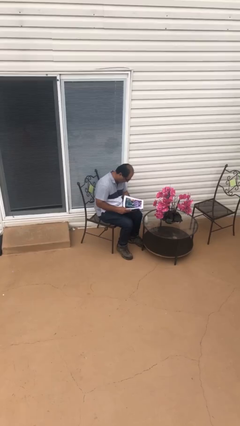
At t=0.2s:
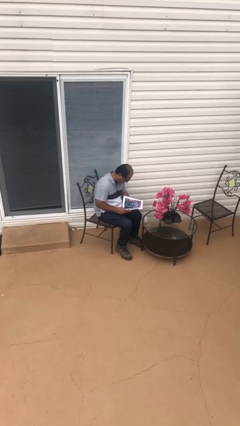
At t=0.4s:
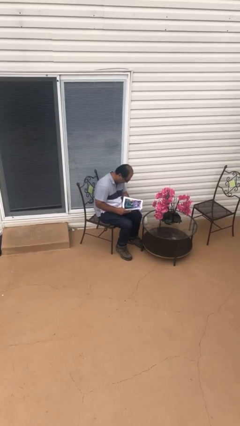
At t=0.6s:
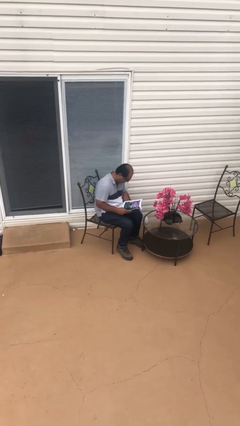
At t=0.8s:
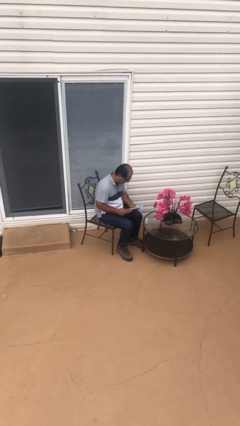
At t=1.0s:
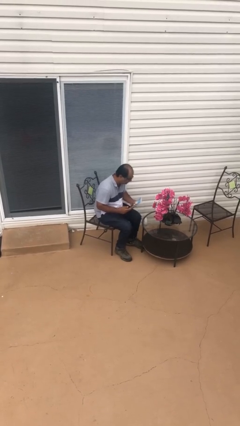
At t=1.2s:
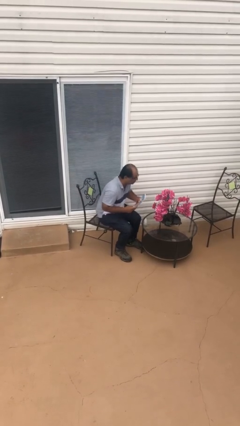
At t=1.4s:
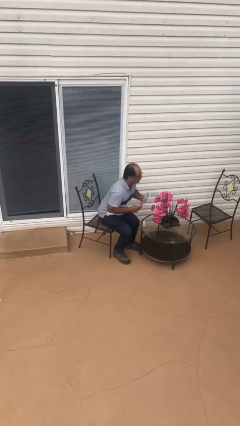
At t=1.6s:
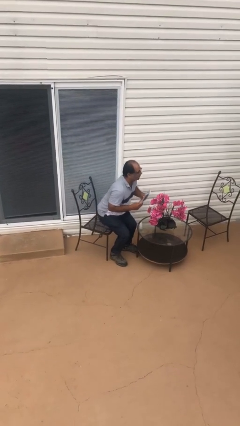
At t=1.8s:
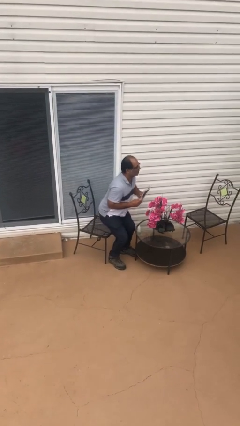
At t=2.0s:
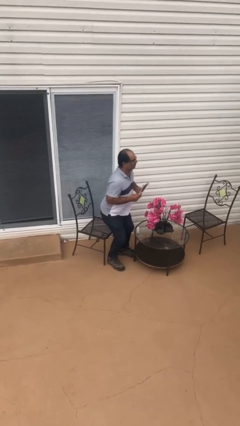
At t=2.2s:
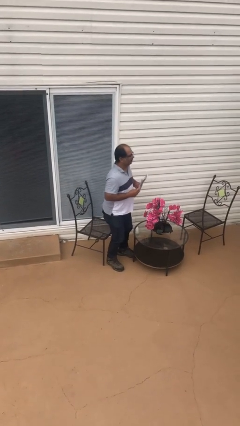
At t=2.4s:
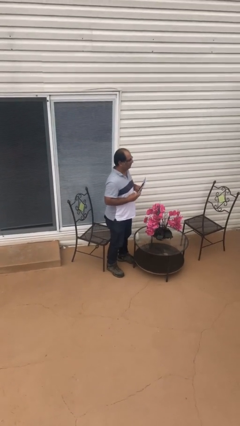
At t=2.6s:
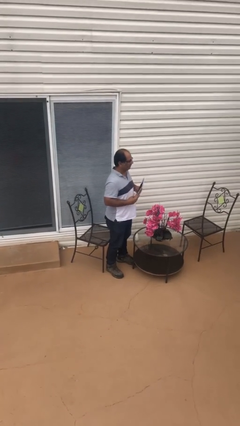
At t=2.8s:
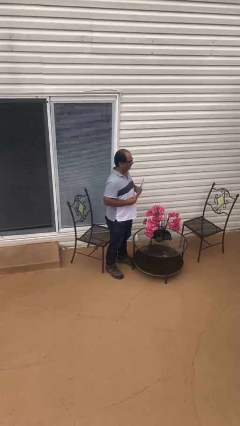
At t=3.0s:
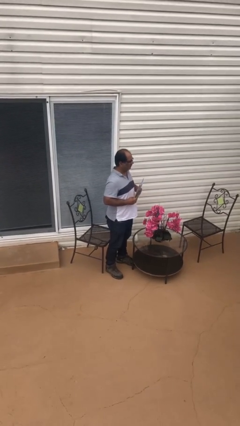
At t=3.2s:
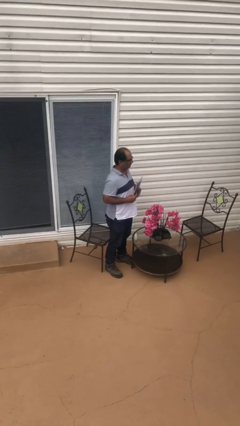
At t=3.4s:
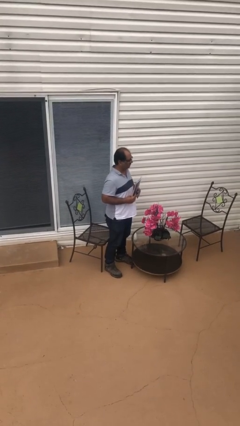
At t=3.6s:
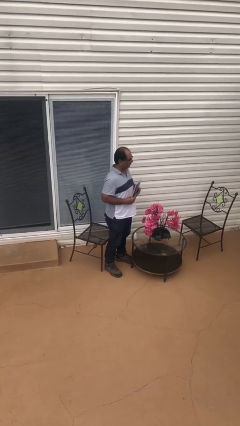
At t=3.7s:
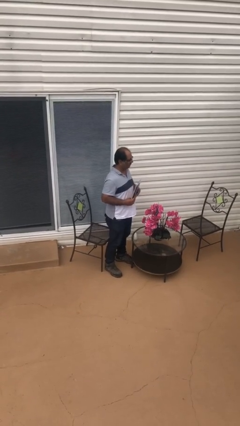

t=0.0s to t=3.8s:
person stands up

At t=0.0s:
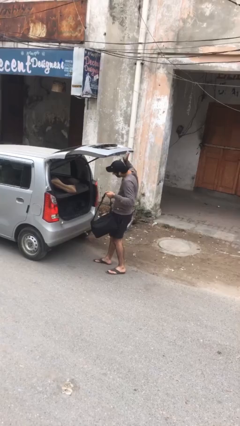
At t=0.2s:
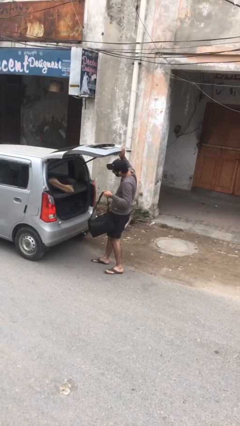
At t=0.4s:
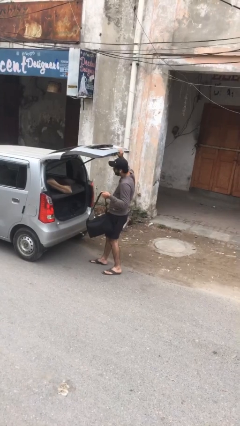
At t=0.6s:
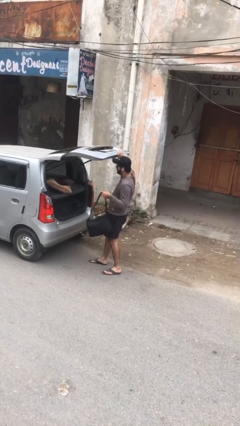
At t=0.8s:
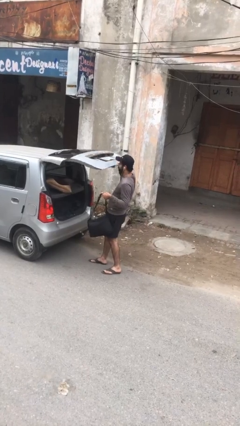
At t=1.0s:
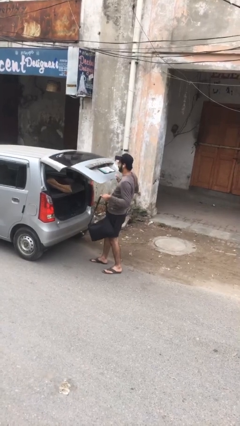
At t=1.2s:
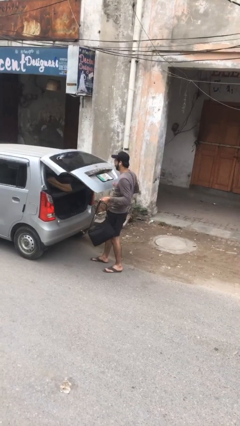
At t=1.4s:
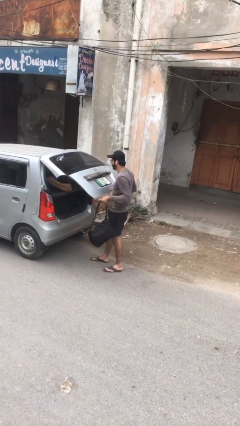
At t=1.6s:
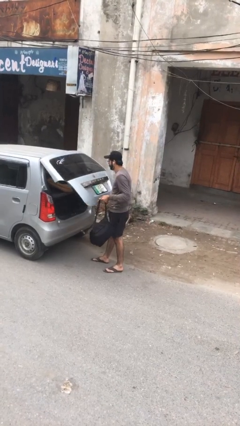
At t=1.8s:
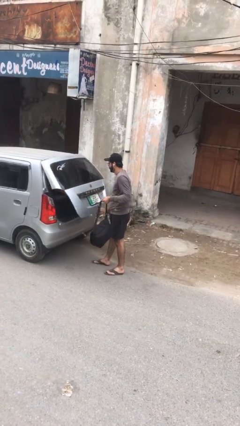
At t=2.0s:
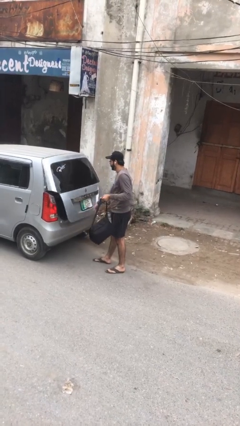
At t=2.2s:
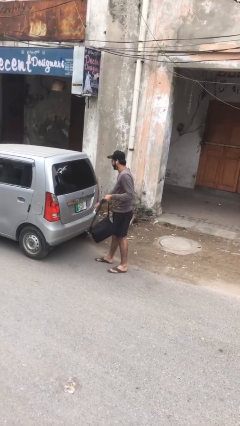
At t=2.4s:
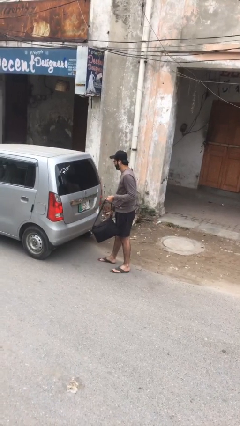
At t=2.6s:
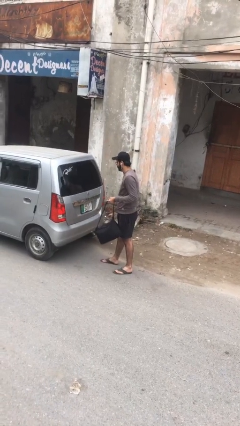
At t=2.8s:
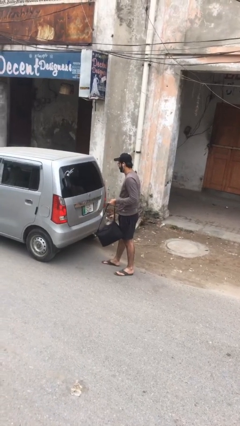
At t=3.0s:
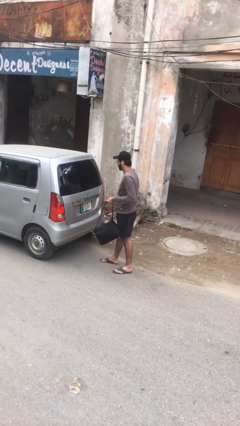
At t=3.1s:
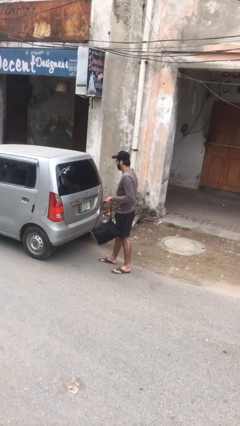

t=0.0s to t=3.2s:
person closes car trunk

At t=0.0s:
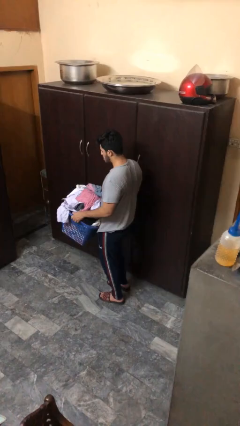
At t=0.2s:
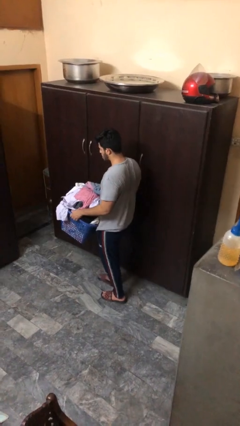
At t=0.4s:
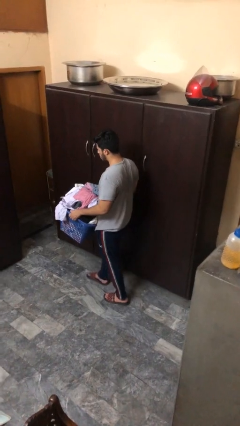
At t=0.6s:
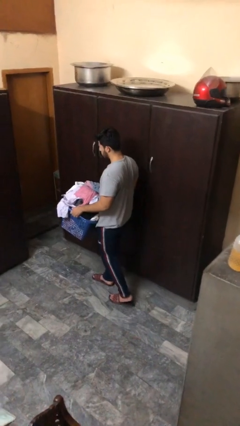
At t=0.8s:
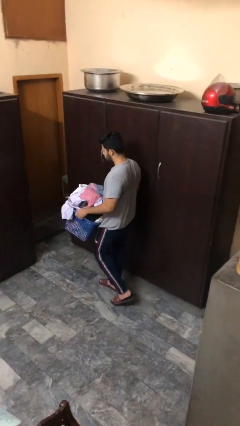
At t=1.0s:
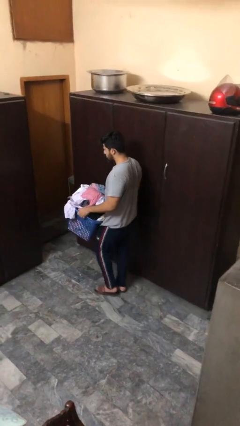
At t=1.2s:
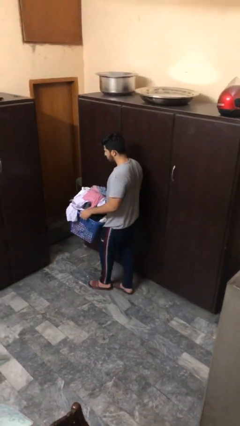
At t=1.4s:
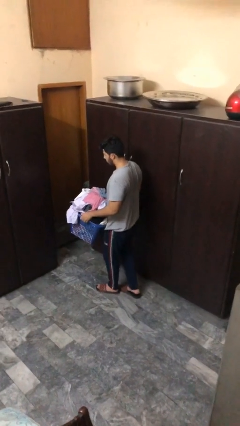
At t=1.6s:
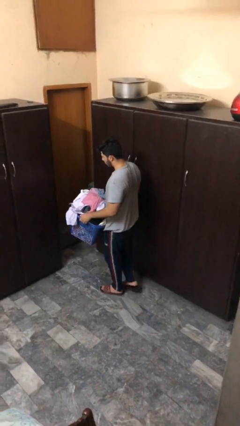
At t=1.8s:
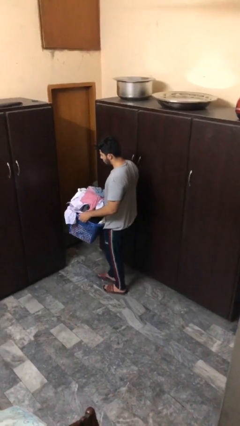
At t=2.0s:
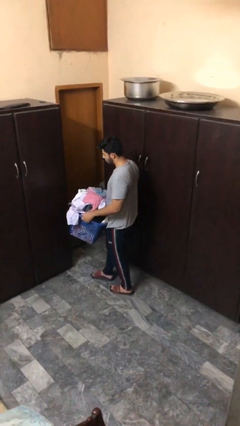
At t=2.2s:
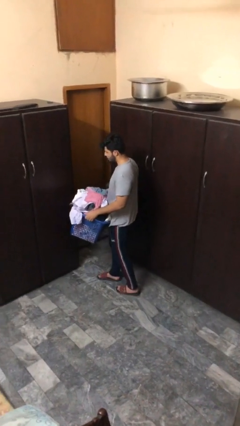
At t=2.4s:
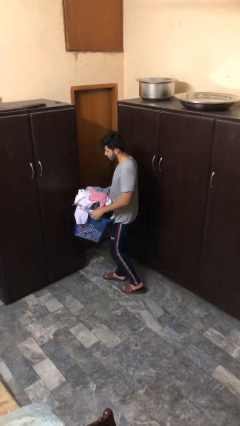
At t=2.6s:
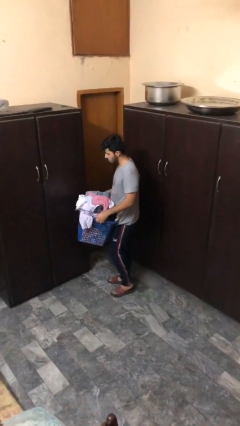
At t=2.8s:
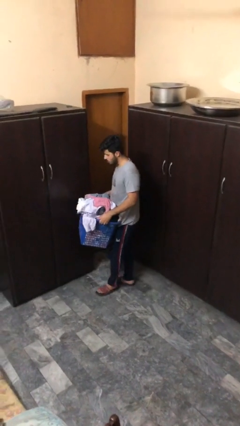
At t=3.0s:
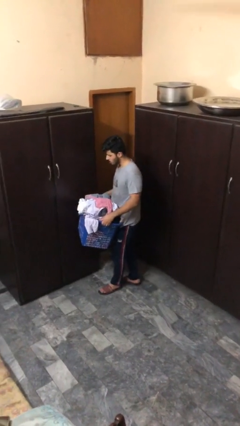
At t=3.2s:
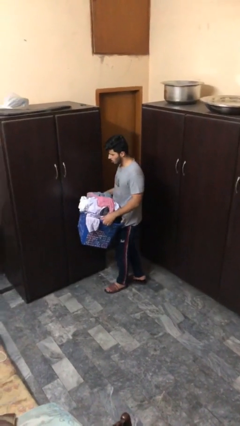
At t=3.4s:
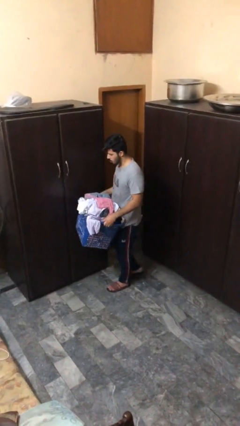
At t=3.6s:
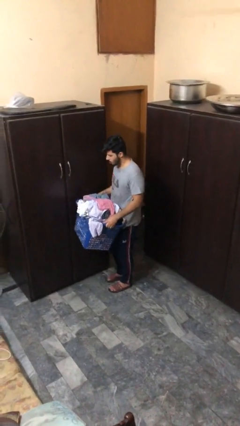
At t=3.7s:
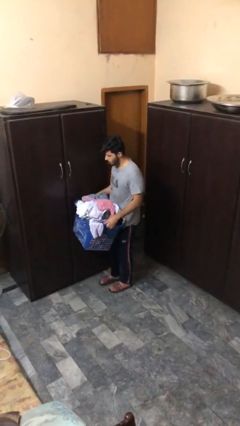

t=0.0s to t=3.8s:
person carries laundry basket

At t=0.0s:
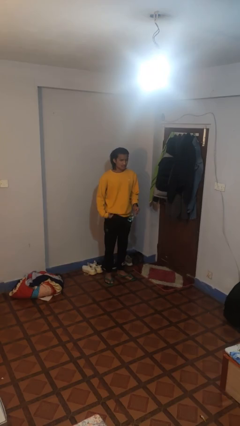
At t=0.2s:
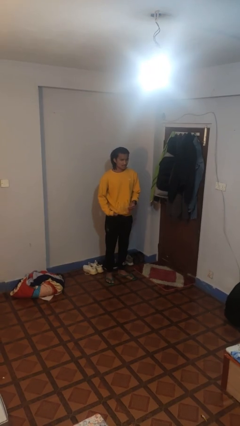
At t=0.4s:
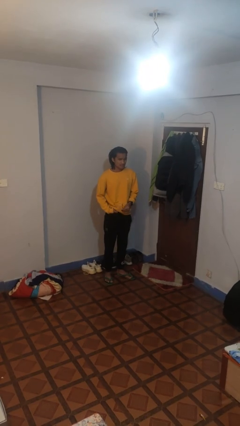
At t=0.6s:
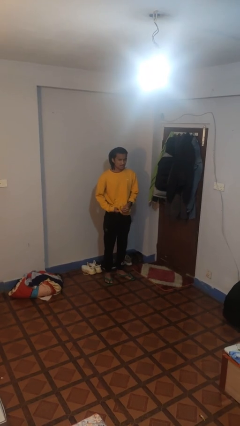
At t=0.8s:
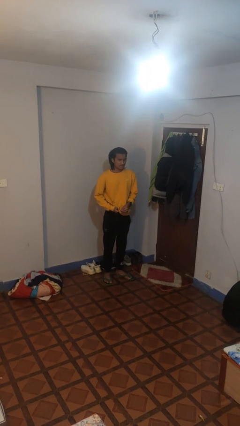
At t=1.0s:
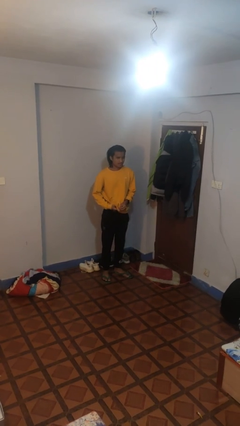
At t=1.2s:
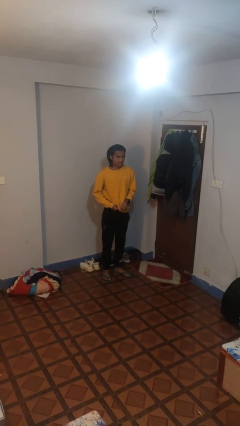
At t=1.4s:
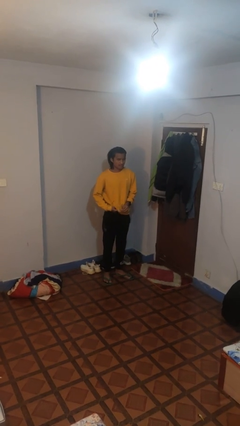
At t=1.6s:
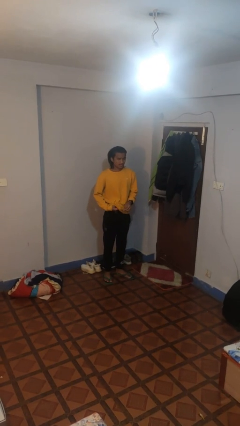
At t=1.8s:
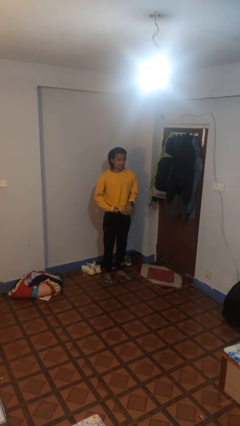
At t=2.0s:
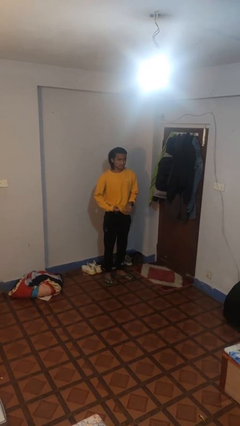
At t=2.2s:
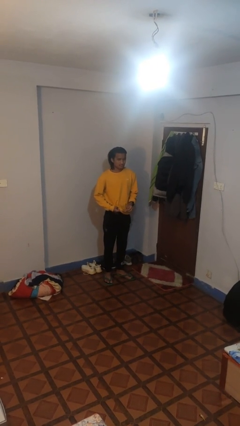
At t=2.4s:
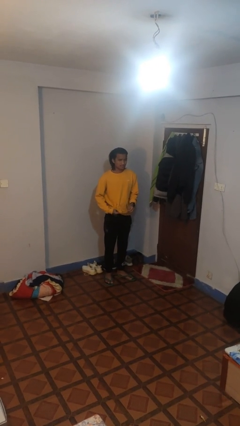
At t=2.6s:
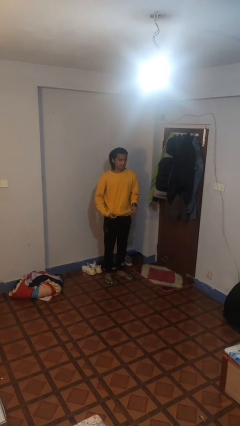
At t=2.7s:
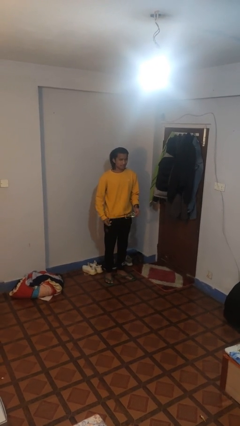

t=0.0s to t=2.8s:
person cleans eyeglasses

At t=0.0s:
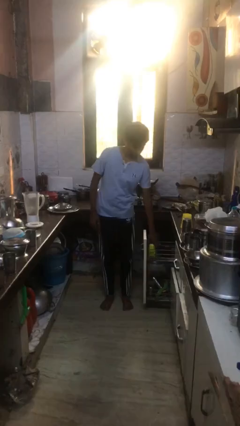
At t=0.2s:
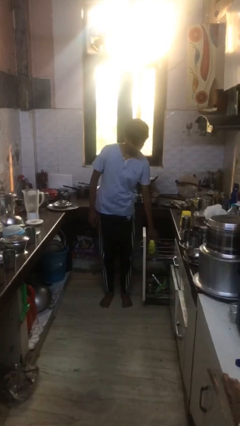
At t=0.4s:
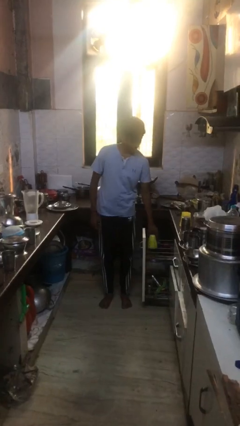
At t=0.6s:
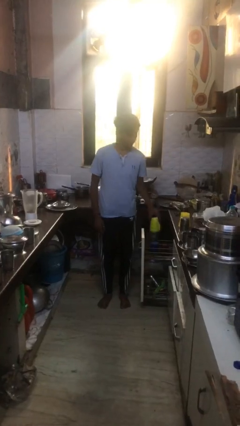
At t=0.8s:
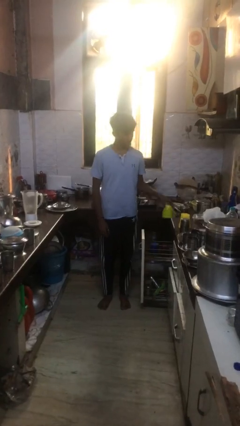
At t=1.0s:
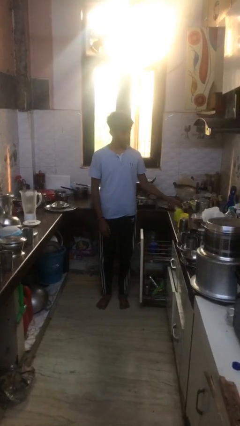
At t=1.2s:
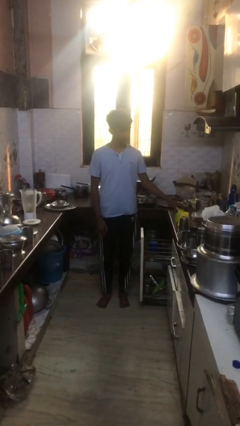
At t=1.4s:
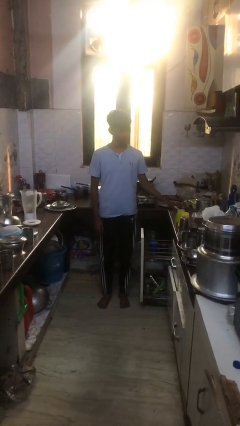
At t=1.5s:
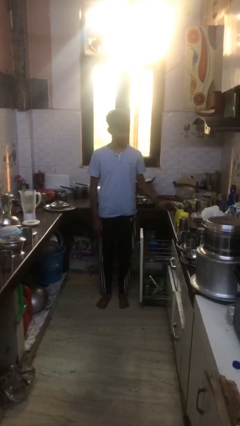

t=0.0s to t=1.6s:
person unloads dishwasher

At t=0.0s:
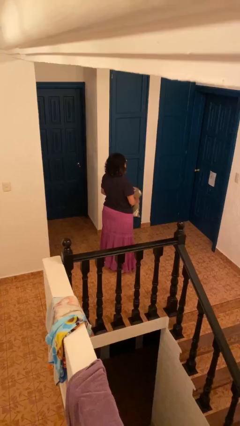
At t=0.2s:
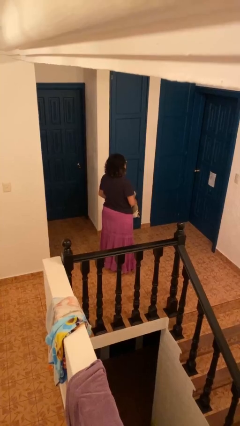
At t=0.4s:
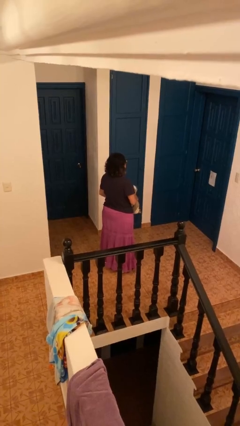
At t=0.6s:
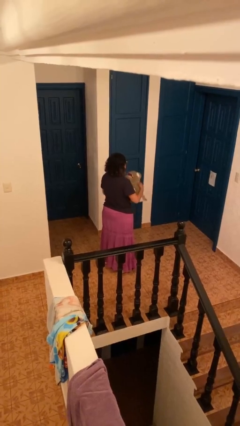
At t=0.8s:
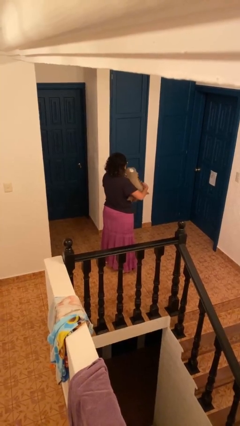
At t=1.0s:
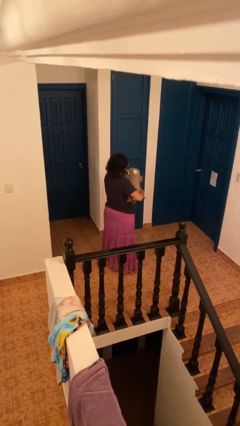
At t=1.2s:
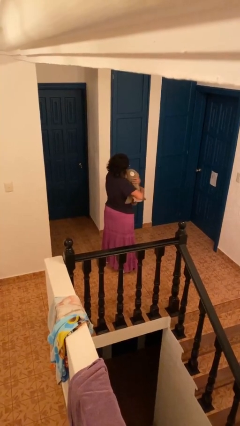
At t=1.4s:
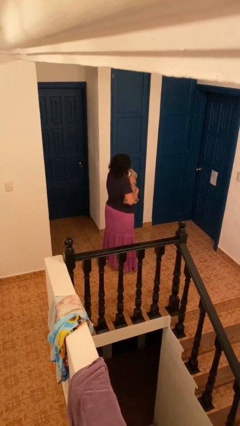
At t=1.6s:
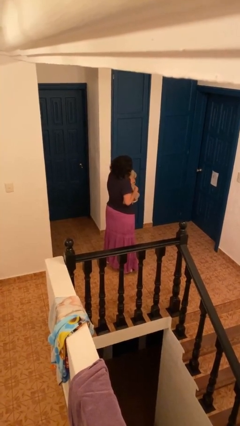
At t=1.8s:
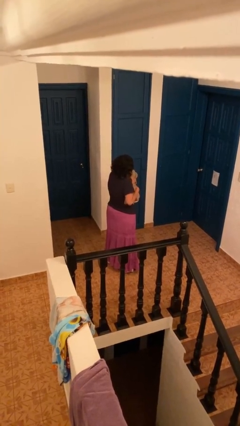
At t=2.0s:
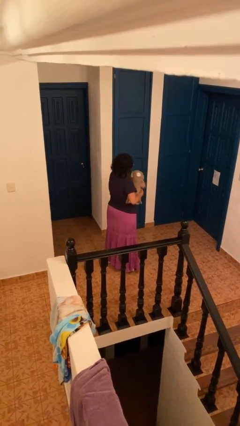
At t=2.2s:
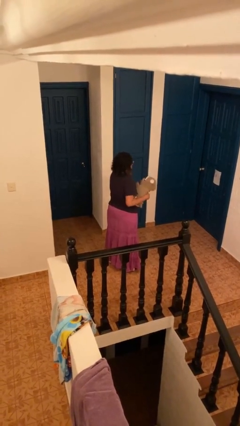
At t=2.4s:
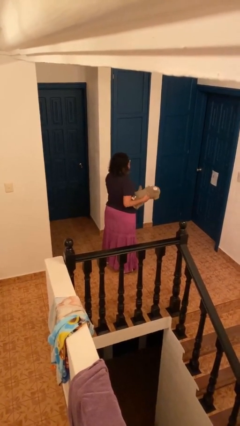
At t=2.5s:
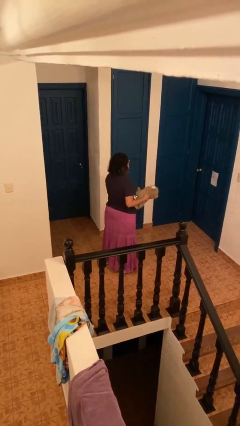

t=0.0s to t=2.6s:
person hugs stuffed animal
